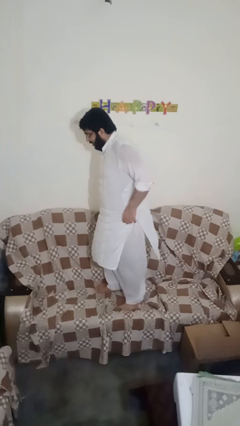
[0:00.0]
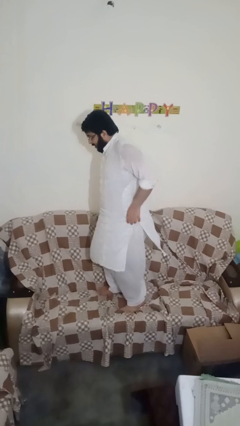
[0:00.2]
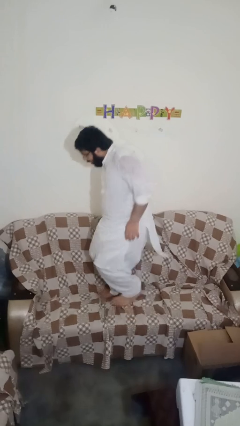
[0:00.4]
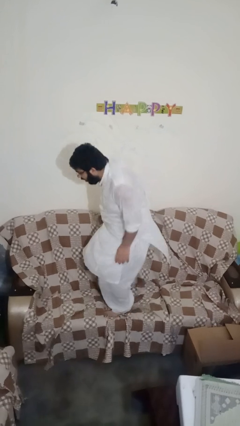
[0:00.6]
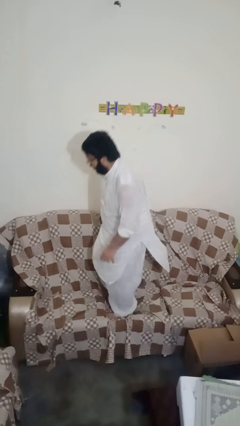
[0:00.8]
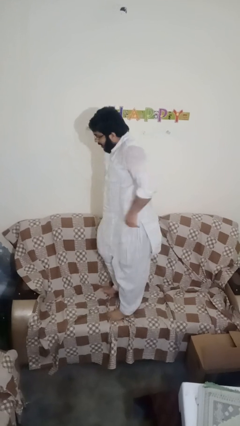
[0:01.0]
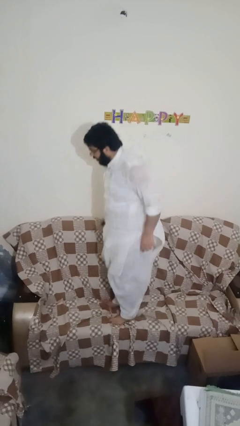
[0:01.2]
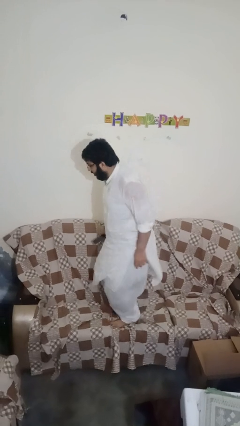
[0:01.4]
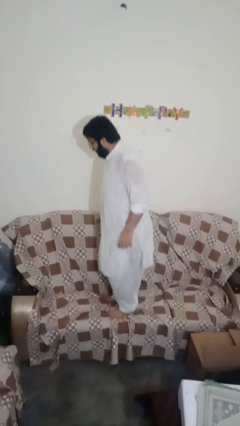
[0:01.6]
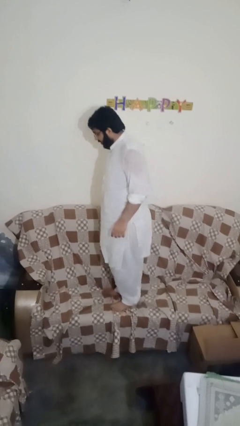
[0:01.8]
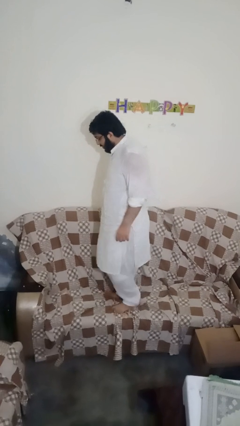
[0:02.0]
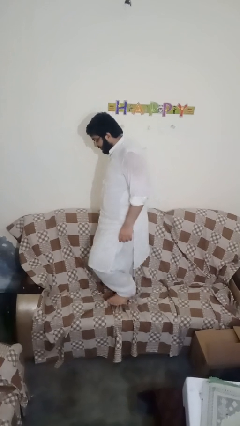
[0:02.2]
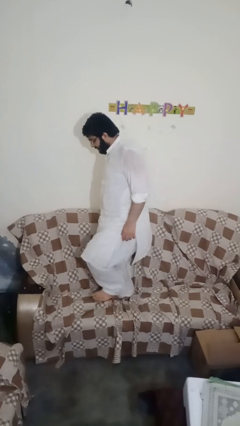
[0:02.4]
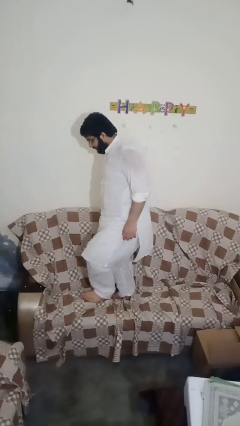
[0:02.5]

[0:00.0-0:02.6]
person jumps on couch

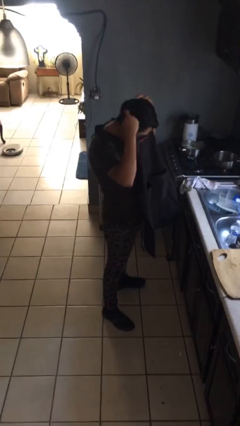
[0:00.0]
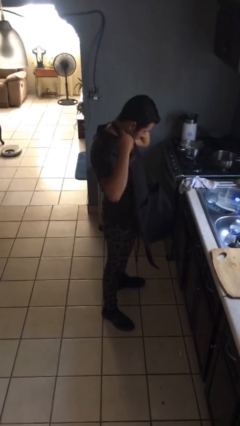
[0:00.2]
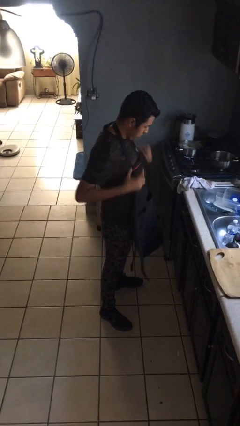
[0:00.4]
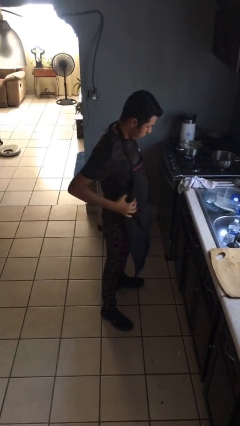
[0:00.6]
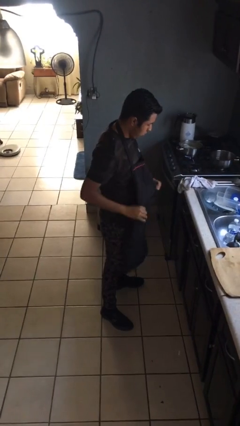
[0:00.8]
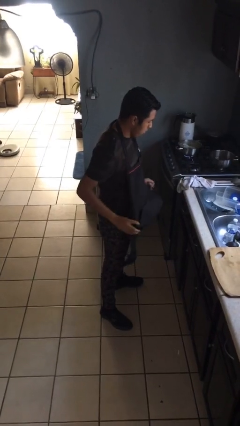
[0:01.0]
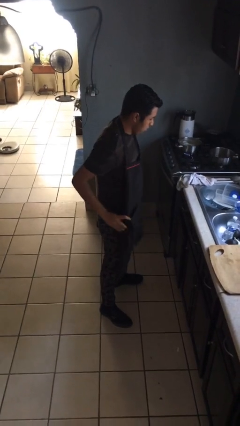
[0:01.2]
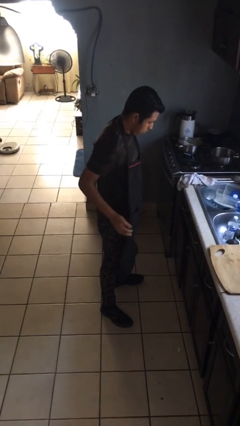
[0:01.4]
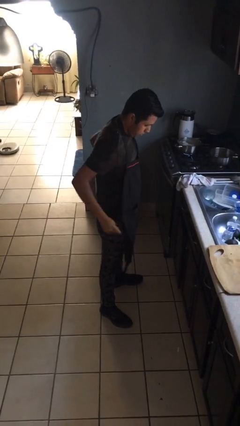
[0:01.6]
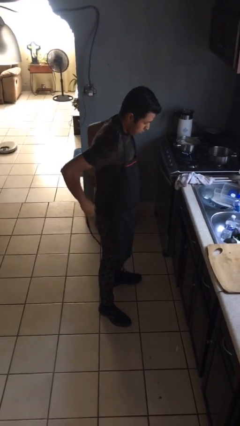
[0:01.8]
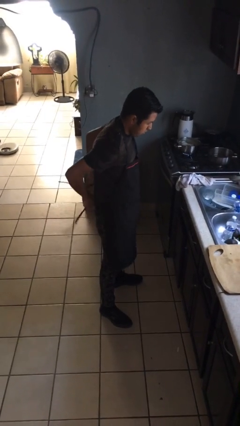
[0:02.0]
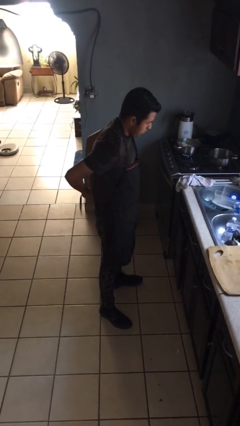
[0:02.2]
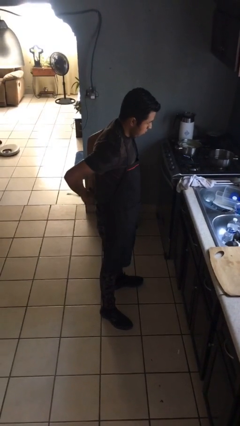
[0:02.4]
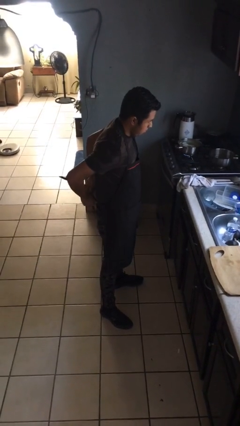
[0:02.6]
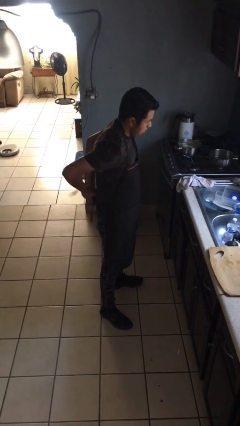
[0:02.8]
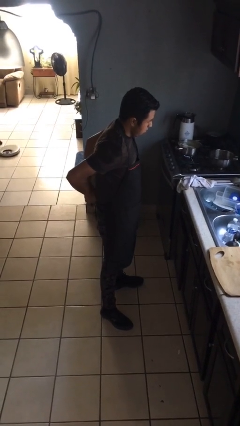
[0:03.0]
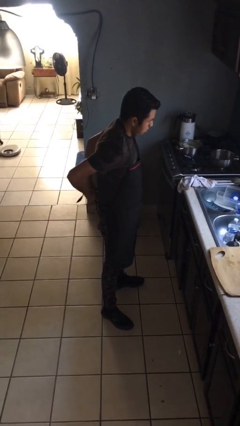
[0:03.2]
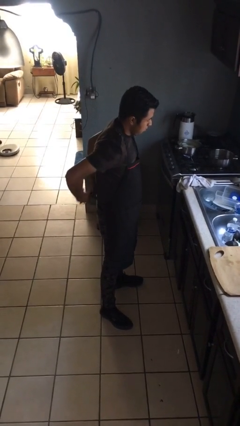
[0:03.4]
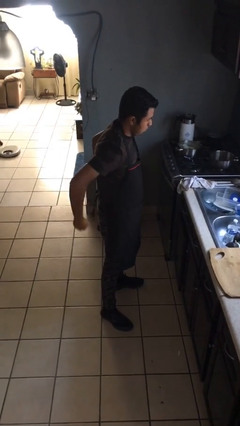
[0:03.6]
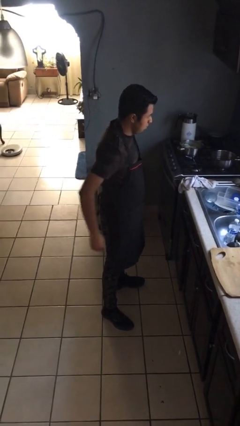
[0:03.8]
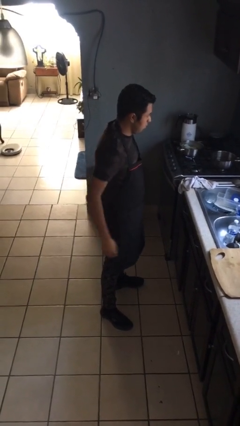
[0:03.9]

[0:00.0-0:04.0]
person puts on apron

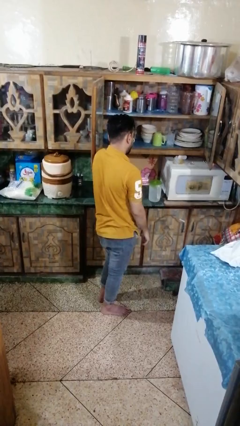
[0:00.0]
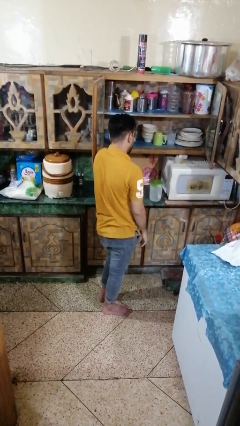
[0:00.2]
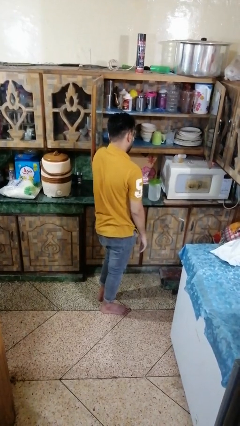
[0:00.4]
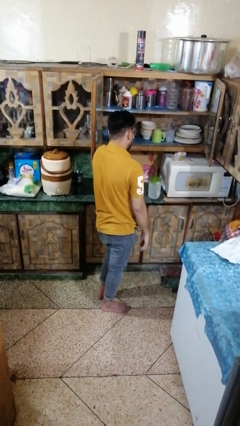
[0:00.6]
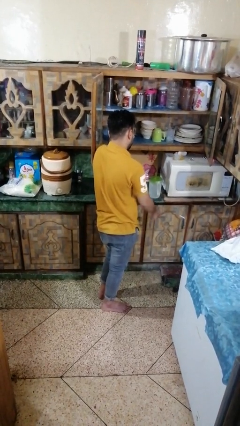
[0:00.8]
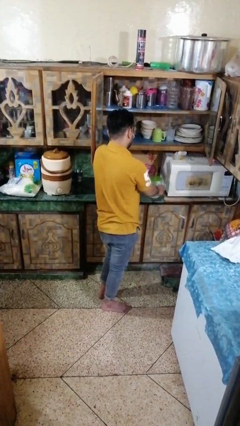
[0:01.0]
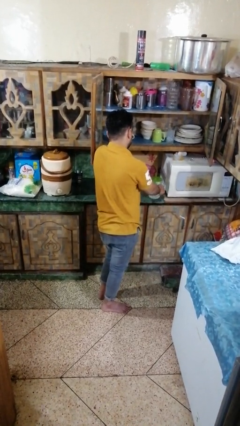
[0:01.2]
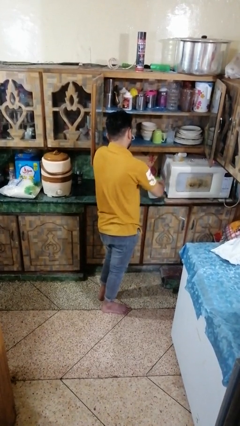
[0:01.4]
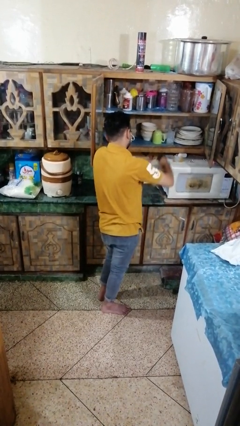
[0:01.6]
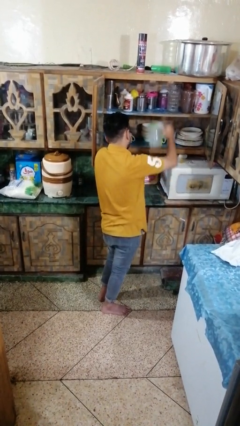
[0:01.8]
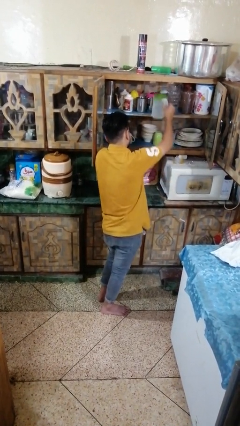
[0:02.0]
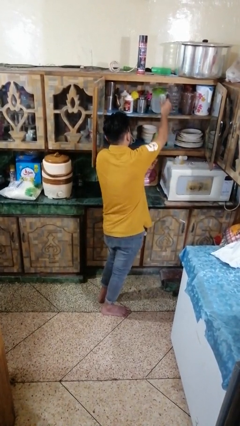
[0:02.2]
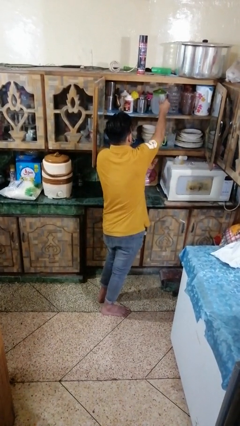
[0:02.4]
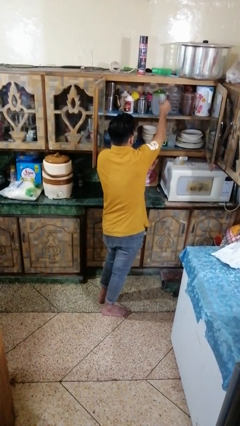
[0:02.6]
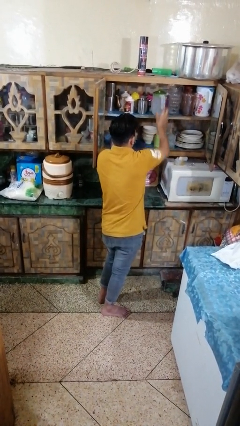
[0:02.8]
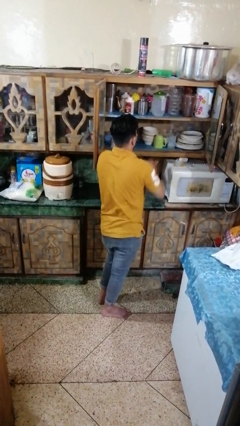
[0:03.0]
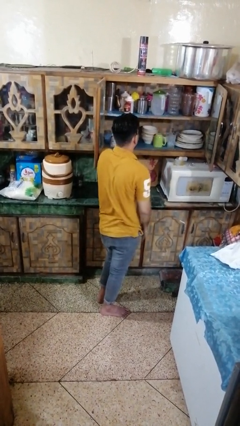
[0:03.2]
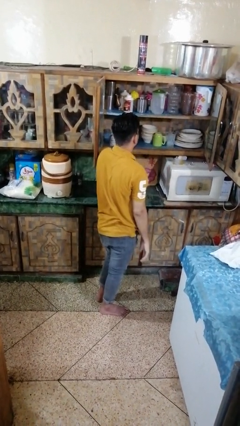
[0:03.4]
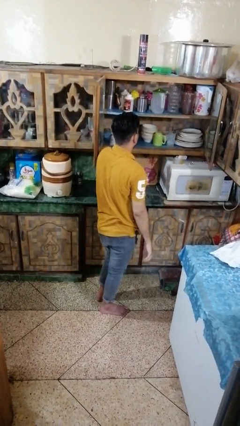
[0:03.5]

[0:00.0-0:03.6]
person puts object in cabinet

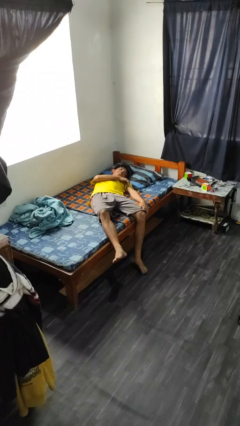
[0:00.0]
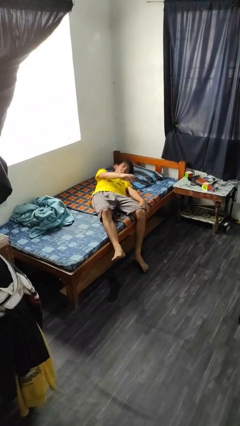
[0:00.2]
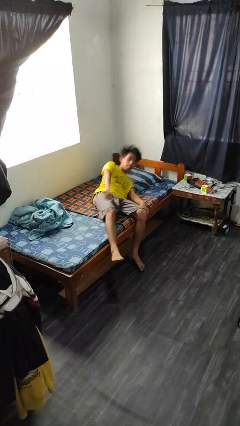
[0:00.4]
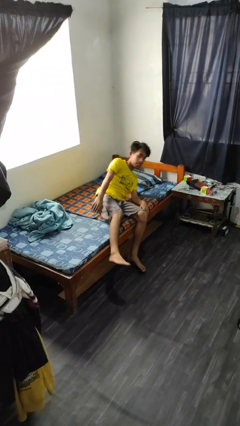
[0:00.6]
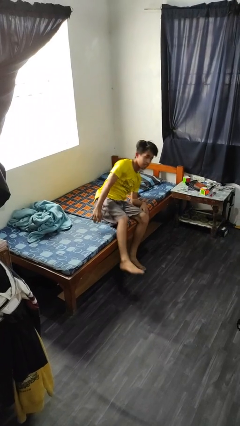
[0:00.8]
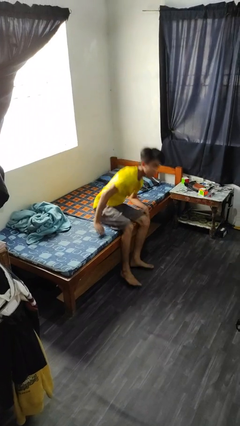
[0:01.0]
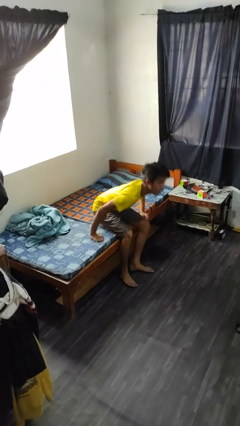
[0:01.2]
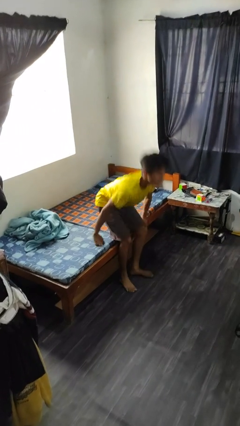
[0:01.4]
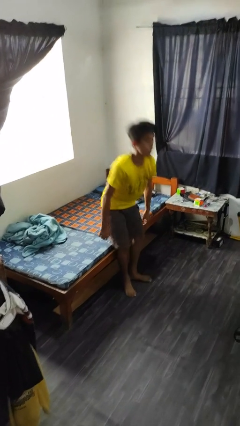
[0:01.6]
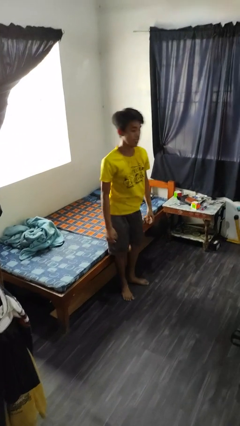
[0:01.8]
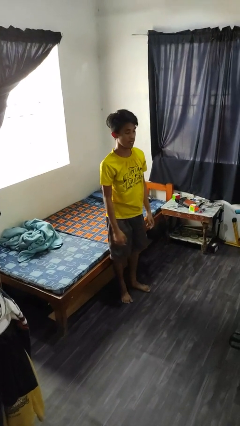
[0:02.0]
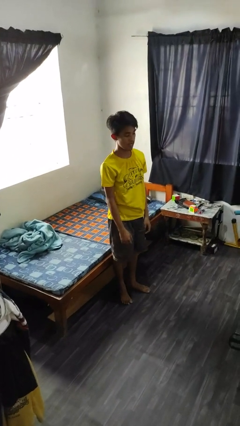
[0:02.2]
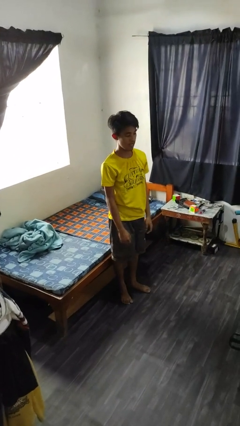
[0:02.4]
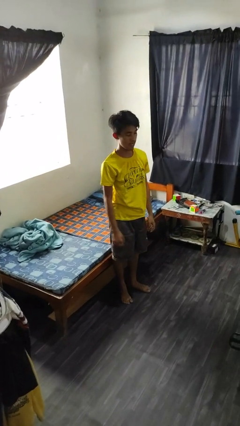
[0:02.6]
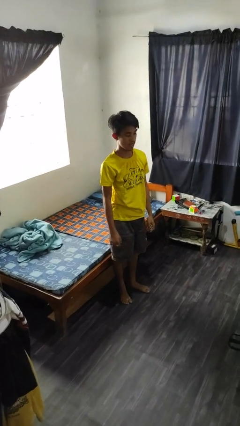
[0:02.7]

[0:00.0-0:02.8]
person stands up

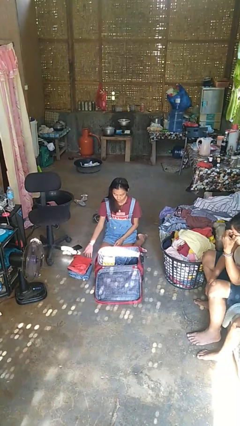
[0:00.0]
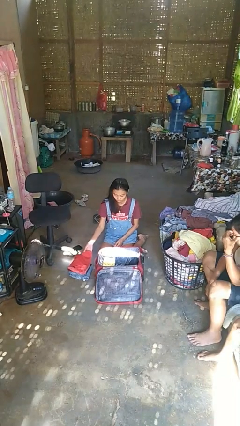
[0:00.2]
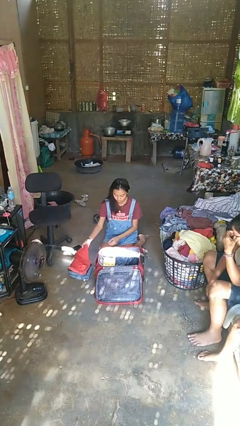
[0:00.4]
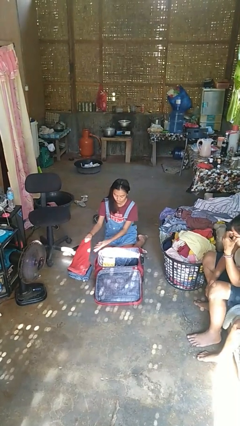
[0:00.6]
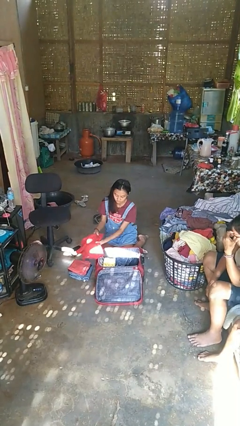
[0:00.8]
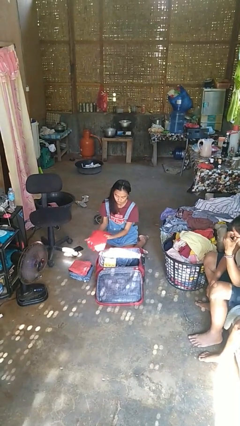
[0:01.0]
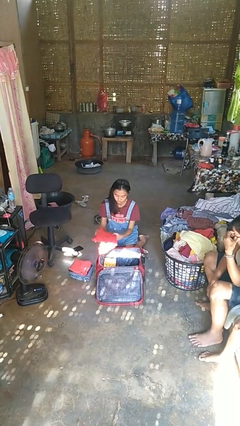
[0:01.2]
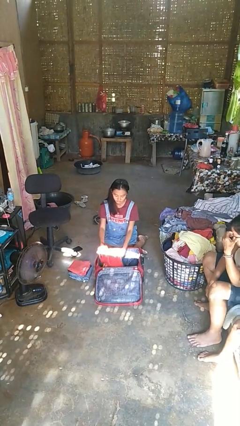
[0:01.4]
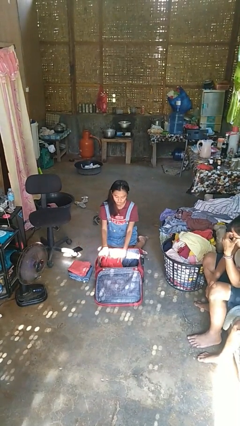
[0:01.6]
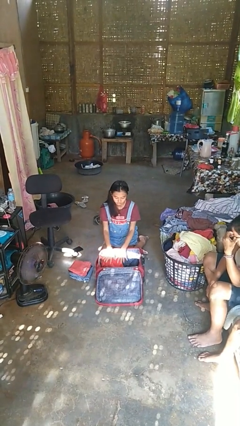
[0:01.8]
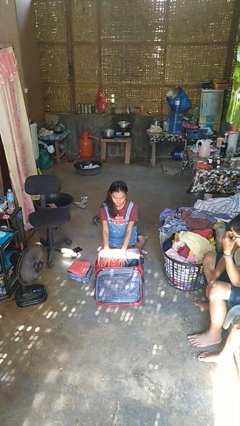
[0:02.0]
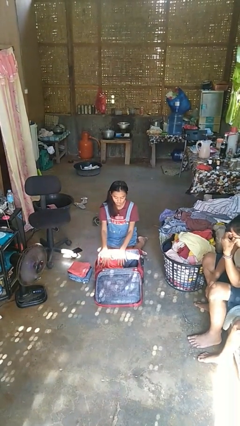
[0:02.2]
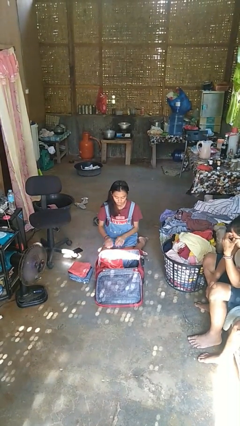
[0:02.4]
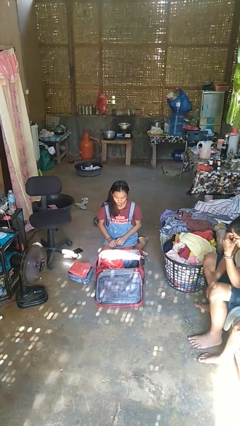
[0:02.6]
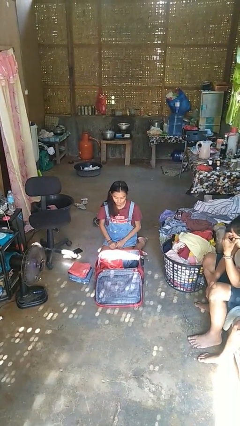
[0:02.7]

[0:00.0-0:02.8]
person loads clothes into suitcase

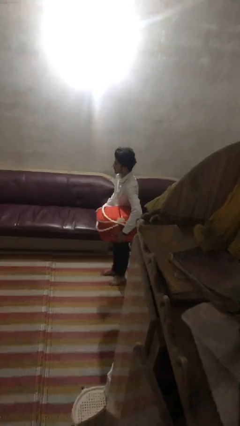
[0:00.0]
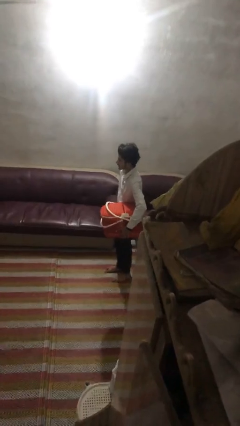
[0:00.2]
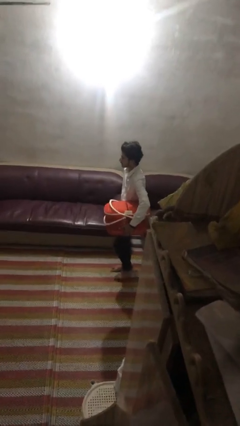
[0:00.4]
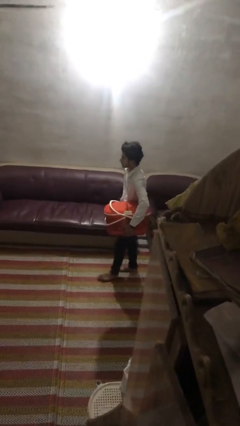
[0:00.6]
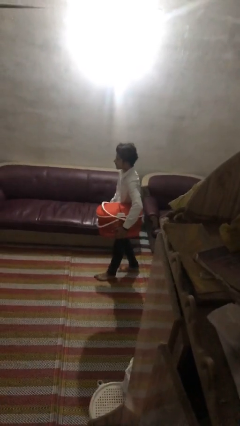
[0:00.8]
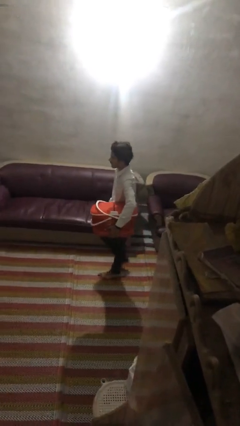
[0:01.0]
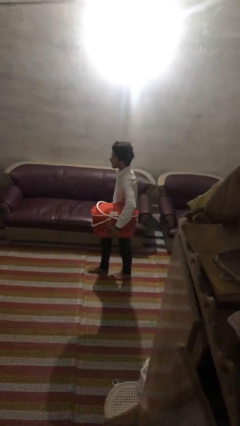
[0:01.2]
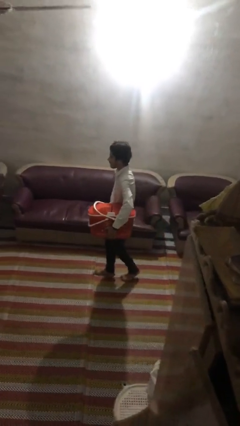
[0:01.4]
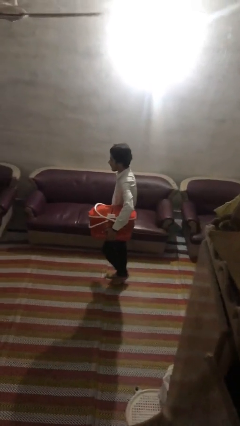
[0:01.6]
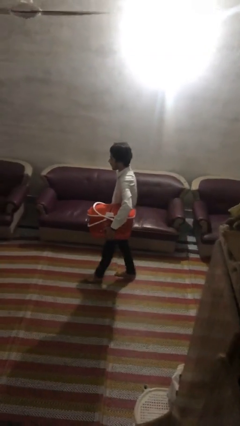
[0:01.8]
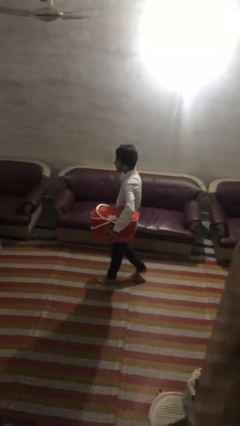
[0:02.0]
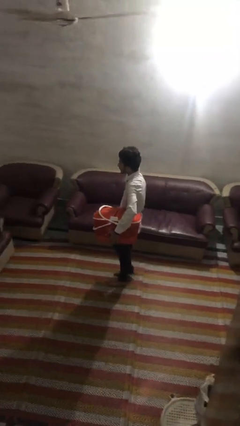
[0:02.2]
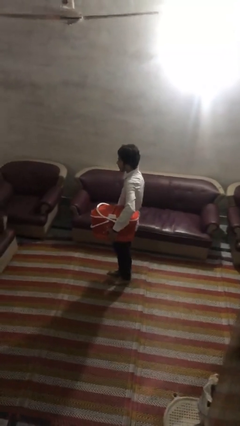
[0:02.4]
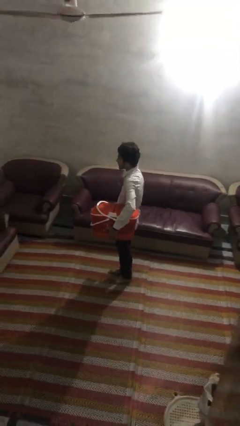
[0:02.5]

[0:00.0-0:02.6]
person carries laundry basket
